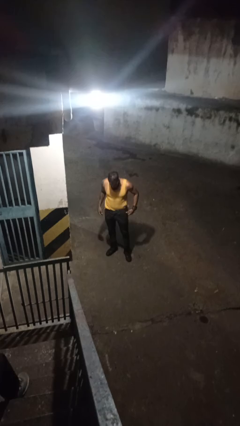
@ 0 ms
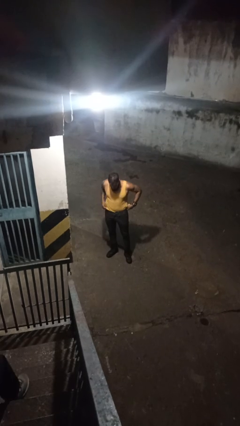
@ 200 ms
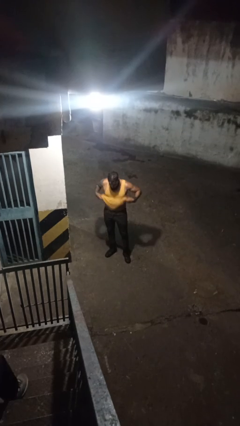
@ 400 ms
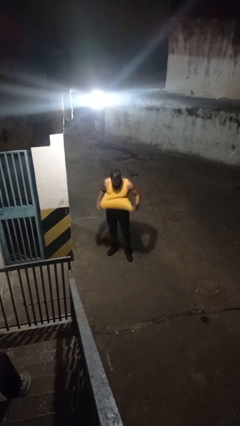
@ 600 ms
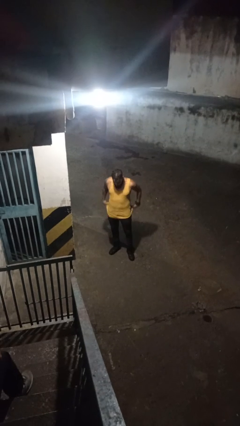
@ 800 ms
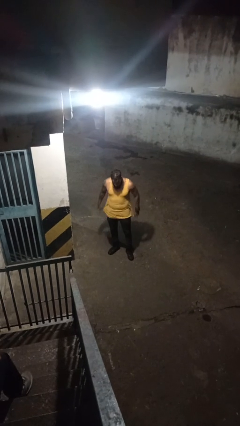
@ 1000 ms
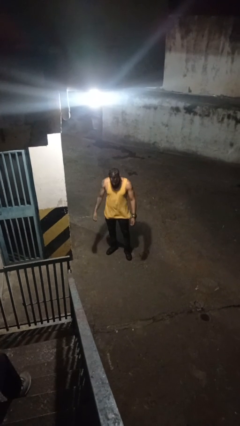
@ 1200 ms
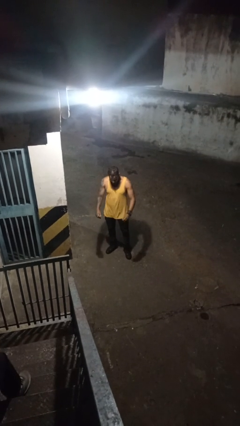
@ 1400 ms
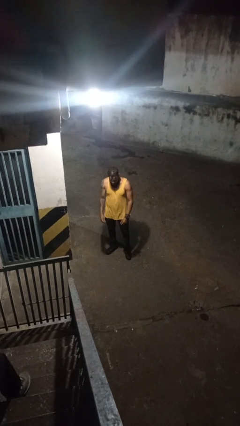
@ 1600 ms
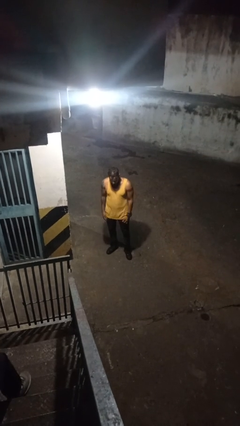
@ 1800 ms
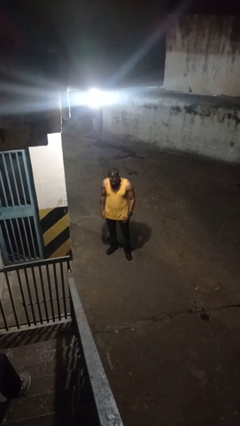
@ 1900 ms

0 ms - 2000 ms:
person untucks shirt

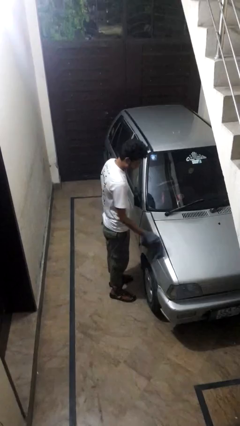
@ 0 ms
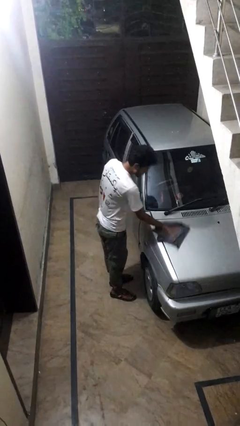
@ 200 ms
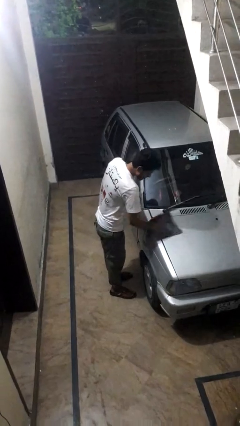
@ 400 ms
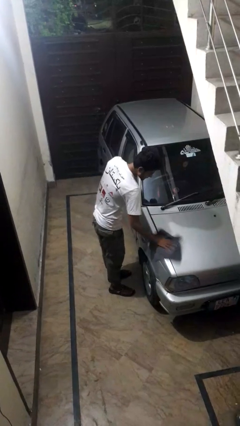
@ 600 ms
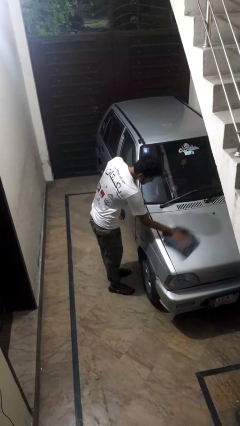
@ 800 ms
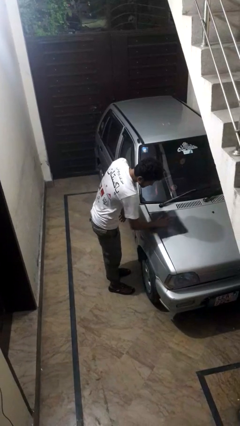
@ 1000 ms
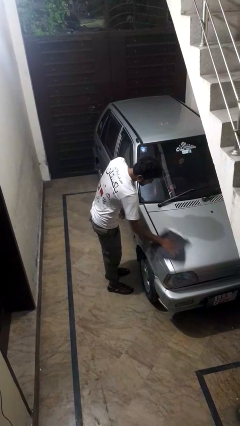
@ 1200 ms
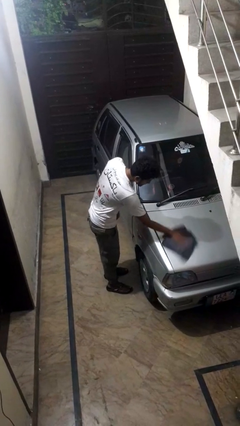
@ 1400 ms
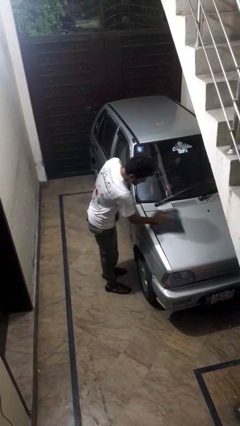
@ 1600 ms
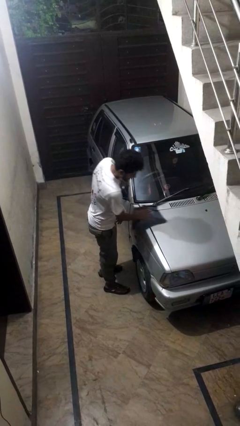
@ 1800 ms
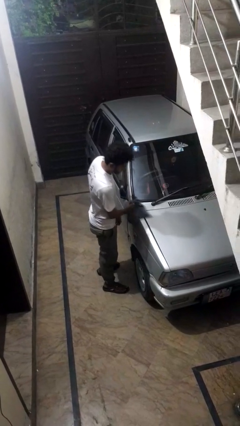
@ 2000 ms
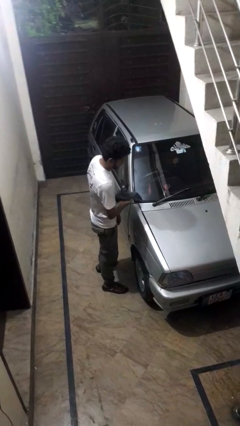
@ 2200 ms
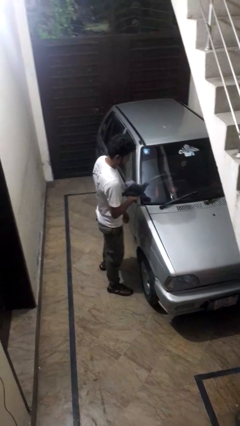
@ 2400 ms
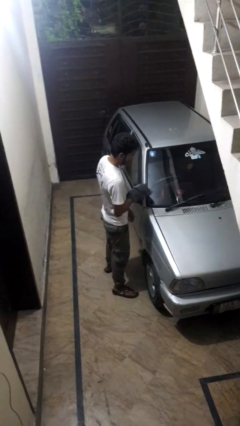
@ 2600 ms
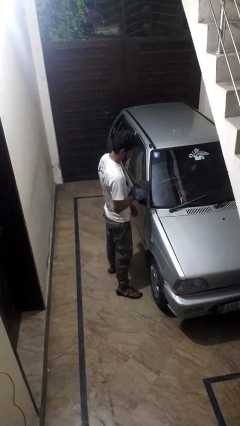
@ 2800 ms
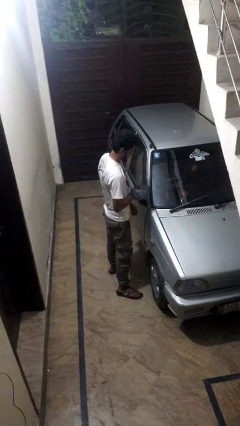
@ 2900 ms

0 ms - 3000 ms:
person polishes car with rag

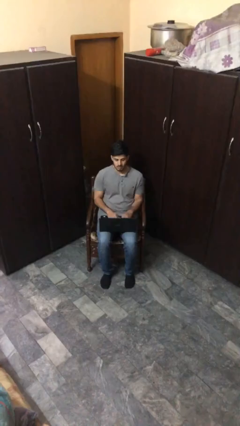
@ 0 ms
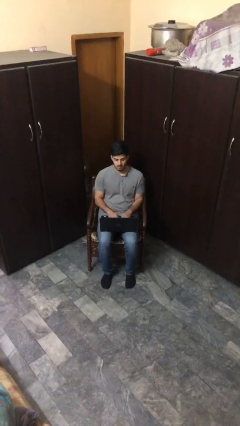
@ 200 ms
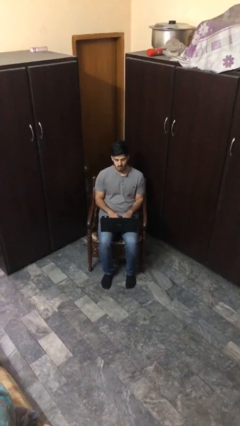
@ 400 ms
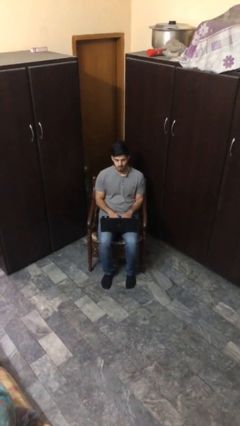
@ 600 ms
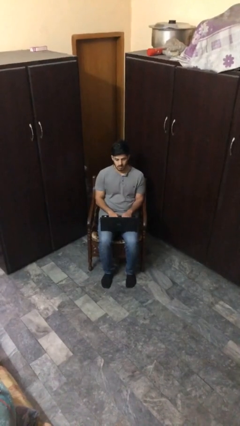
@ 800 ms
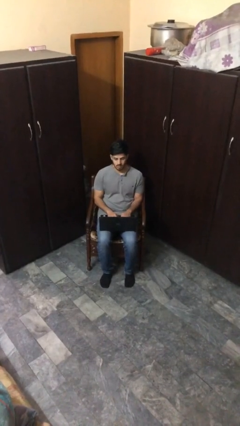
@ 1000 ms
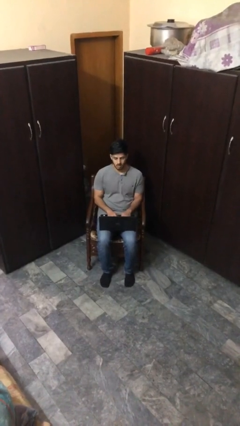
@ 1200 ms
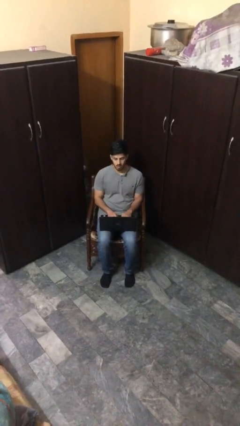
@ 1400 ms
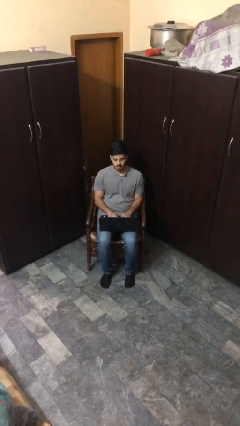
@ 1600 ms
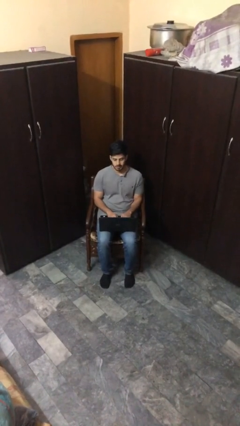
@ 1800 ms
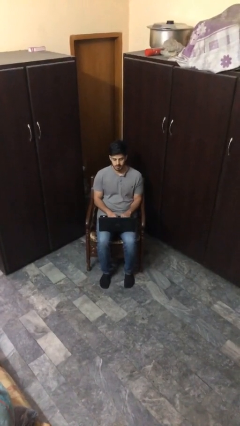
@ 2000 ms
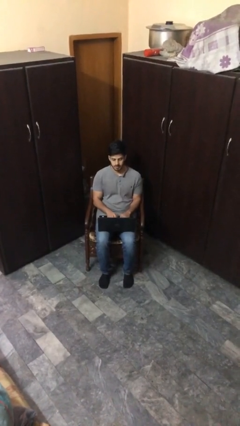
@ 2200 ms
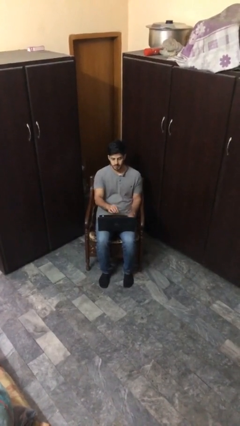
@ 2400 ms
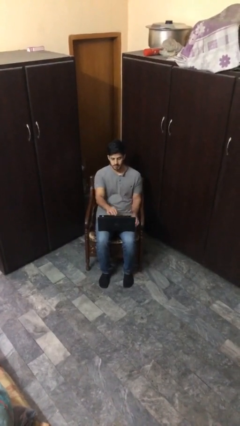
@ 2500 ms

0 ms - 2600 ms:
person interacts with laptop

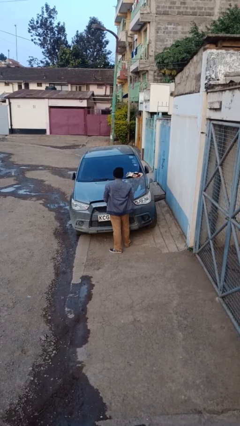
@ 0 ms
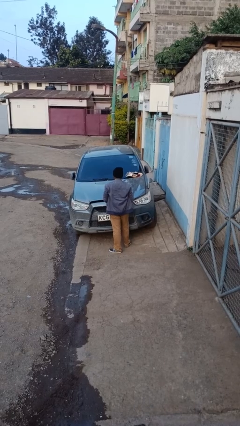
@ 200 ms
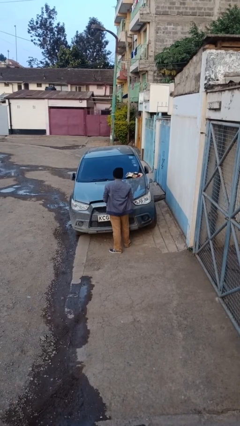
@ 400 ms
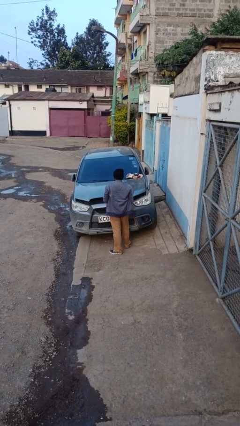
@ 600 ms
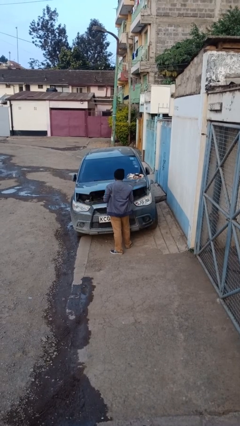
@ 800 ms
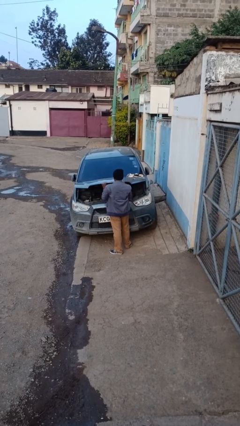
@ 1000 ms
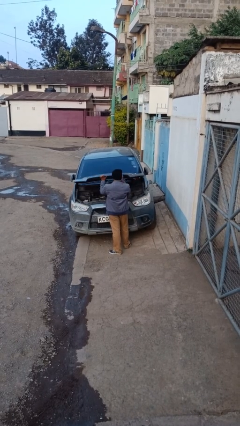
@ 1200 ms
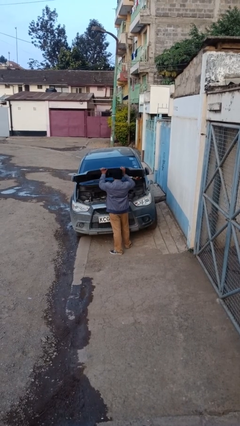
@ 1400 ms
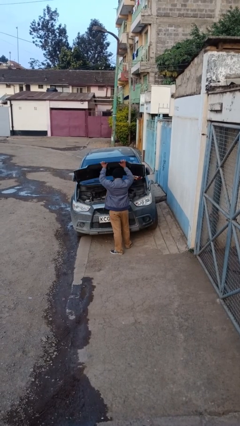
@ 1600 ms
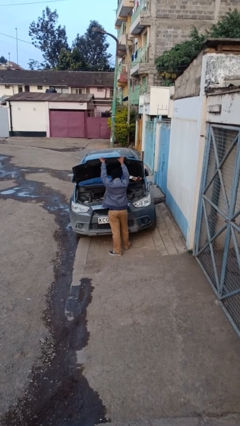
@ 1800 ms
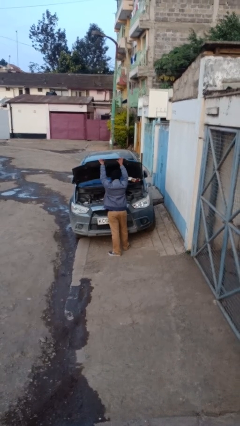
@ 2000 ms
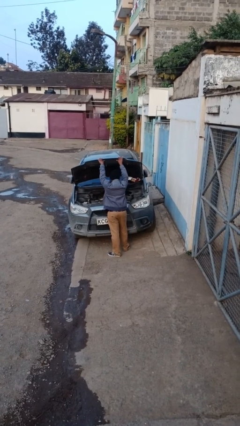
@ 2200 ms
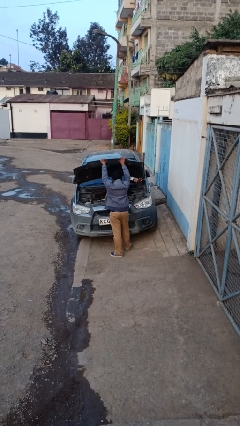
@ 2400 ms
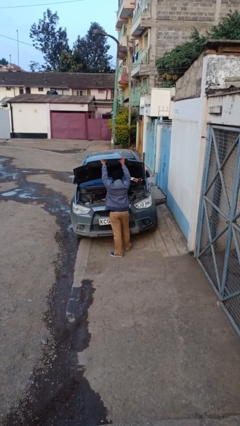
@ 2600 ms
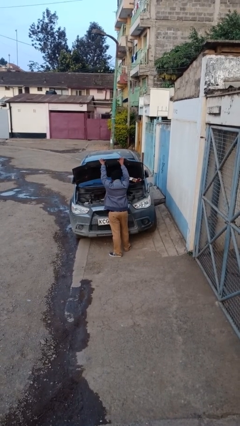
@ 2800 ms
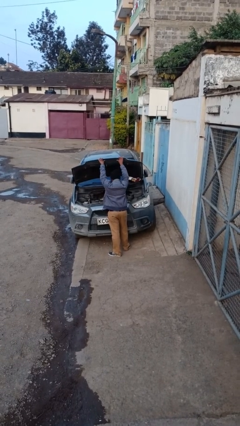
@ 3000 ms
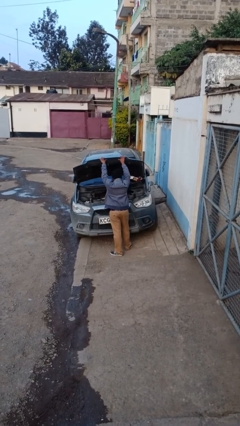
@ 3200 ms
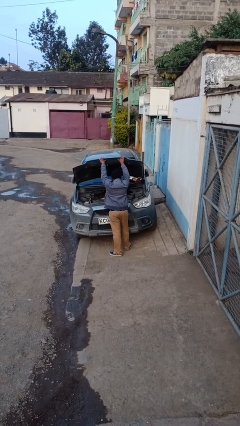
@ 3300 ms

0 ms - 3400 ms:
person opens car hood

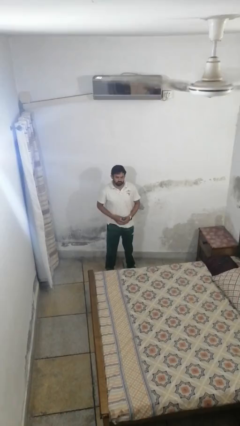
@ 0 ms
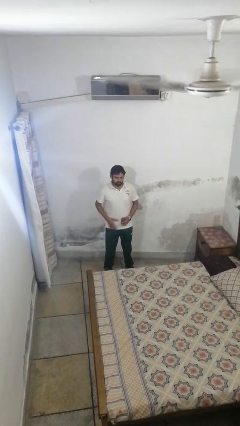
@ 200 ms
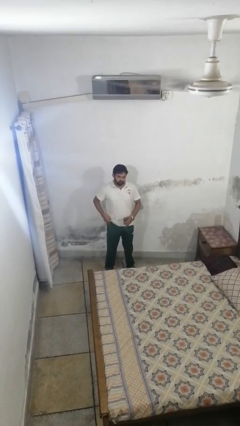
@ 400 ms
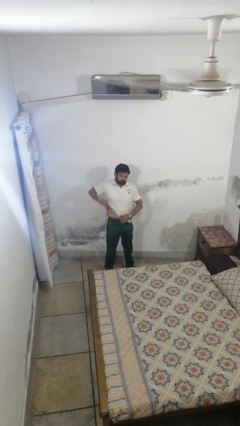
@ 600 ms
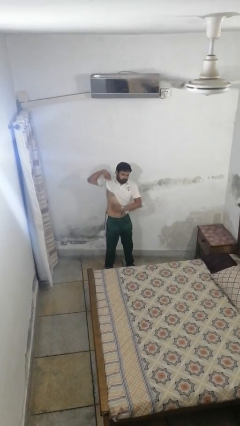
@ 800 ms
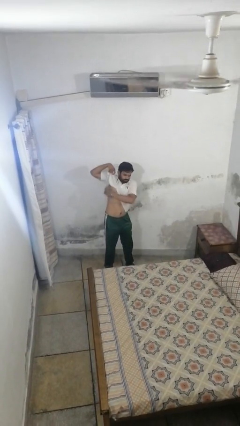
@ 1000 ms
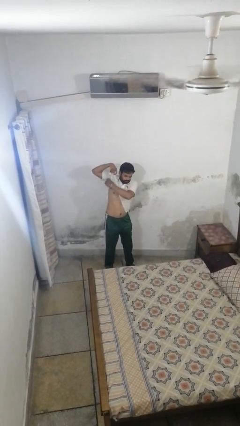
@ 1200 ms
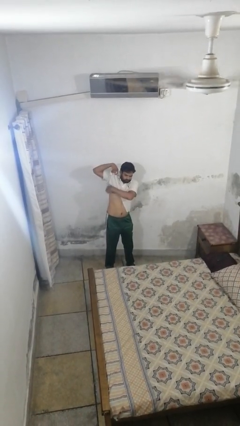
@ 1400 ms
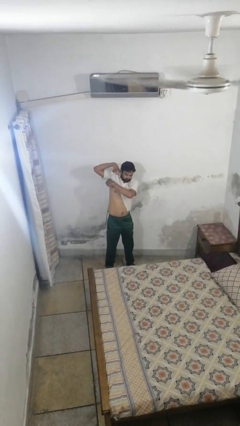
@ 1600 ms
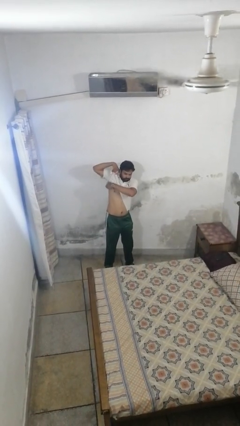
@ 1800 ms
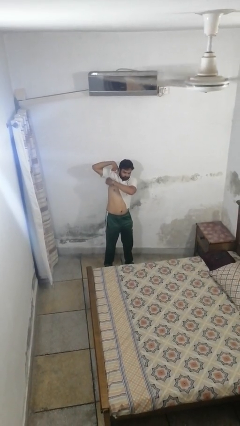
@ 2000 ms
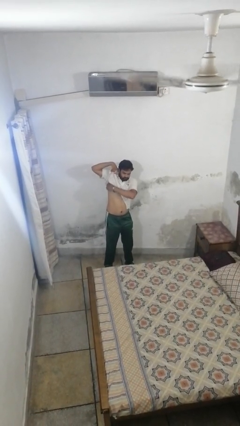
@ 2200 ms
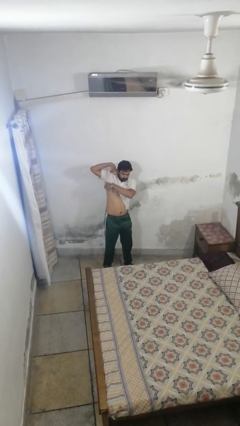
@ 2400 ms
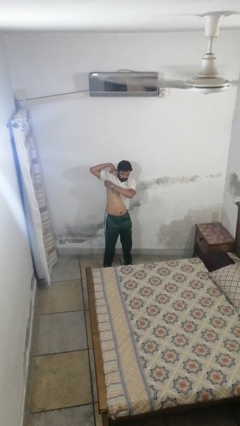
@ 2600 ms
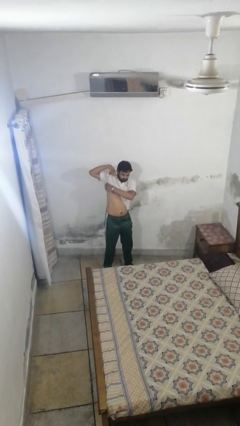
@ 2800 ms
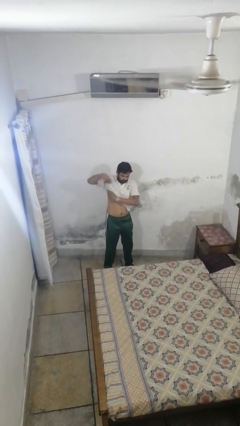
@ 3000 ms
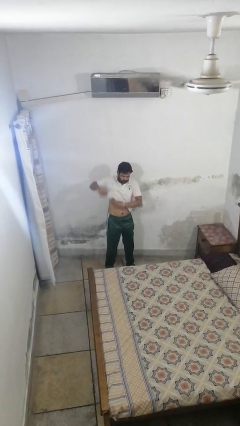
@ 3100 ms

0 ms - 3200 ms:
person applies deodorant

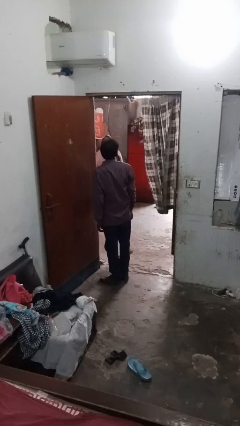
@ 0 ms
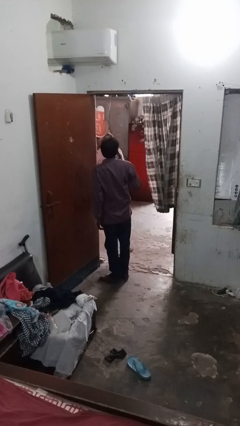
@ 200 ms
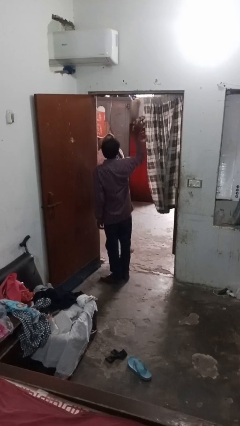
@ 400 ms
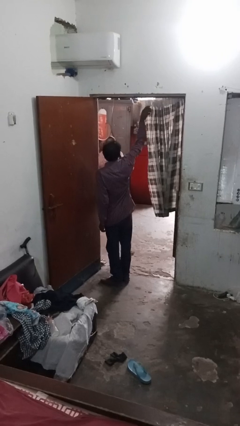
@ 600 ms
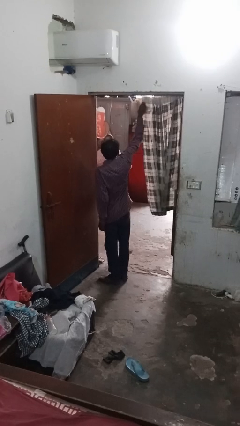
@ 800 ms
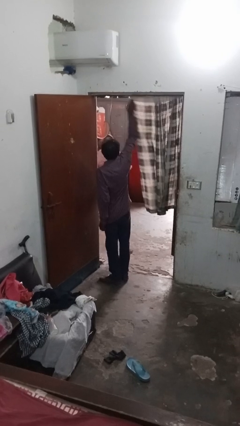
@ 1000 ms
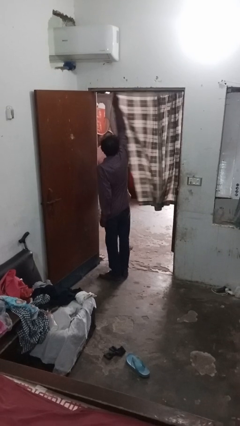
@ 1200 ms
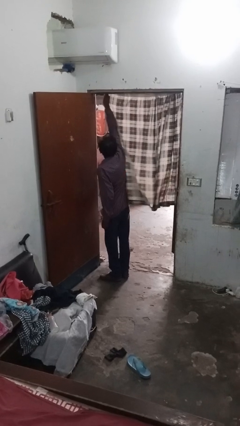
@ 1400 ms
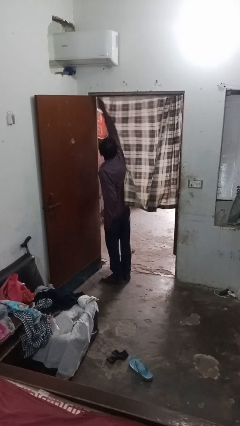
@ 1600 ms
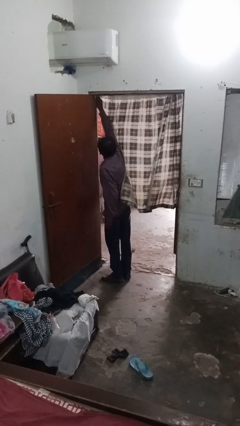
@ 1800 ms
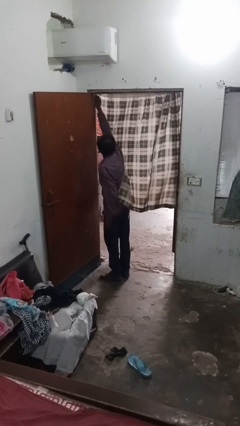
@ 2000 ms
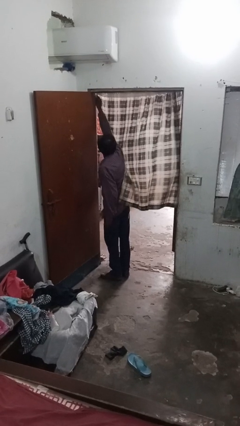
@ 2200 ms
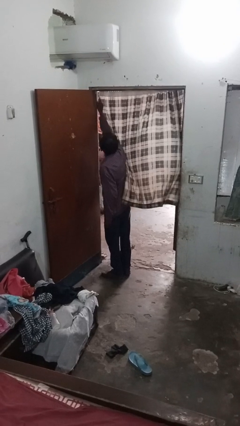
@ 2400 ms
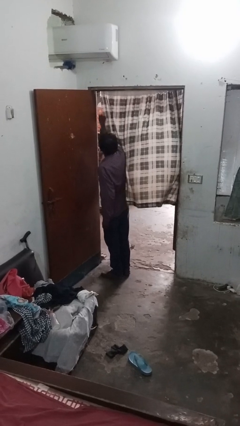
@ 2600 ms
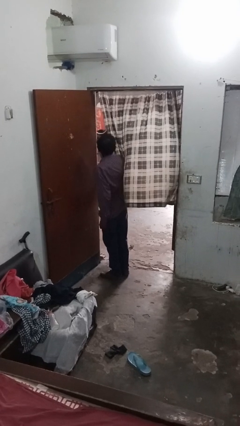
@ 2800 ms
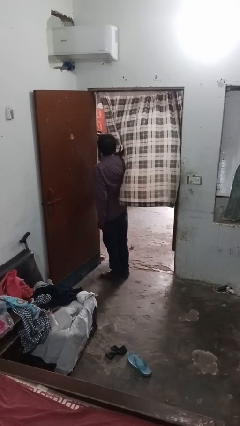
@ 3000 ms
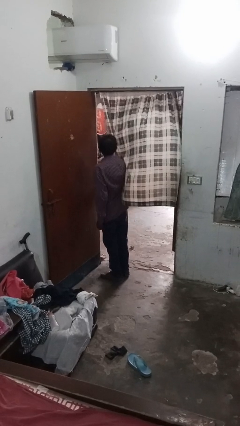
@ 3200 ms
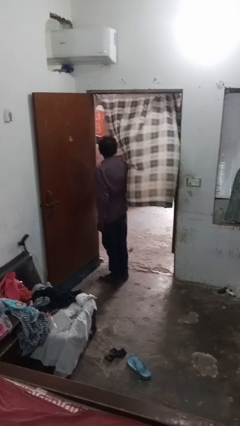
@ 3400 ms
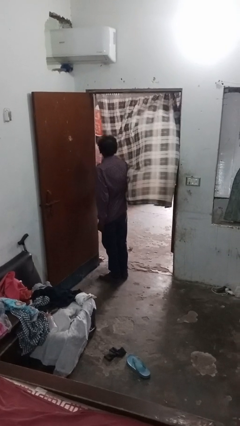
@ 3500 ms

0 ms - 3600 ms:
person closes curtains
